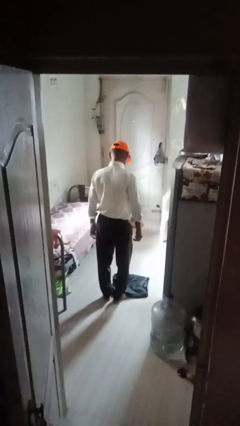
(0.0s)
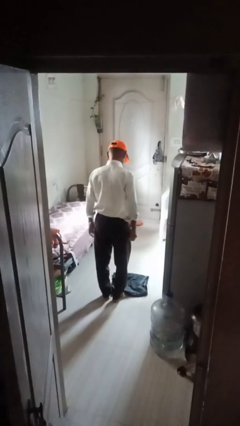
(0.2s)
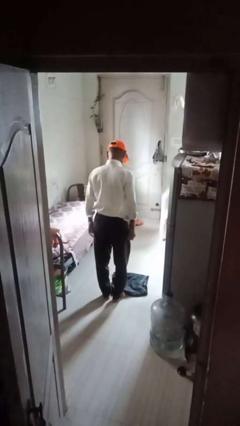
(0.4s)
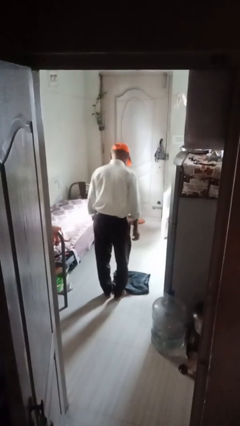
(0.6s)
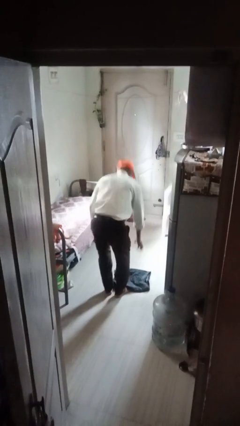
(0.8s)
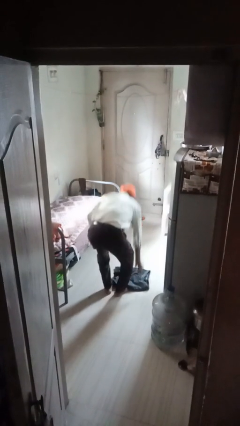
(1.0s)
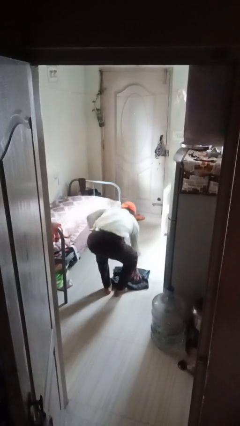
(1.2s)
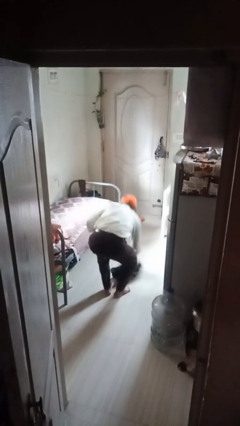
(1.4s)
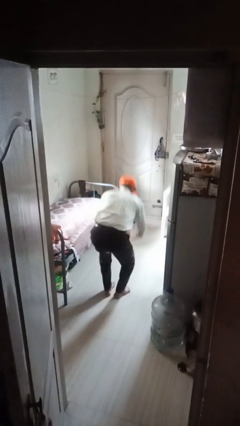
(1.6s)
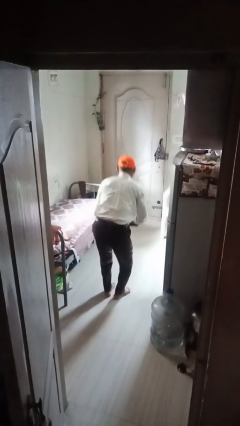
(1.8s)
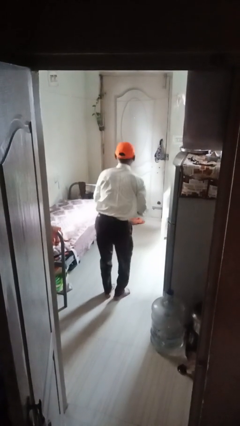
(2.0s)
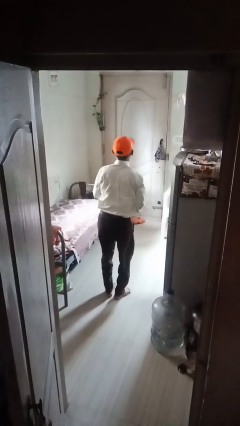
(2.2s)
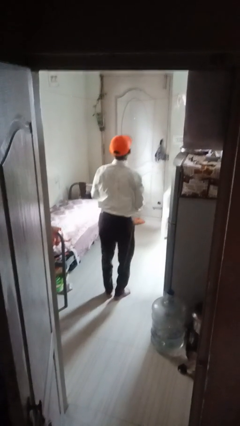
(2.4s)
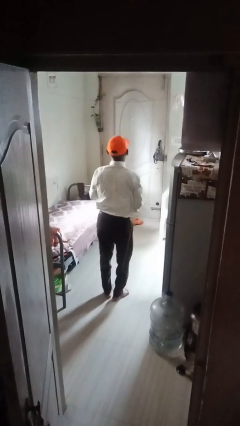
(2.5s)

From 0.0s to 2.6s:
person picks up object from floor

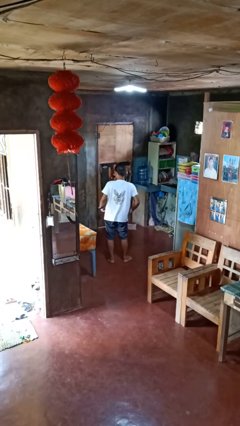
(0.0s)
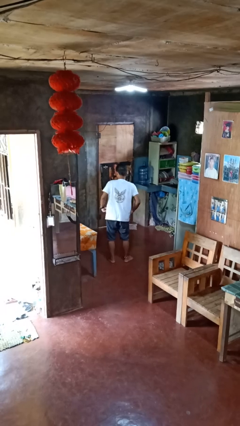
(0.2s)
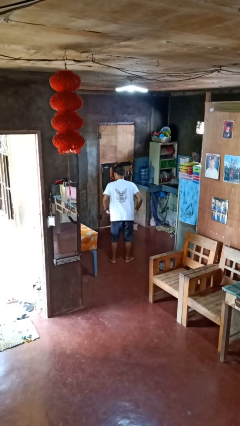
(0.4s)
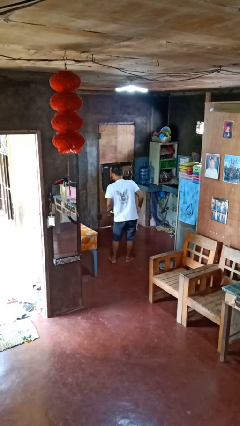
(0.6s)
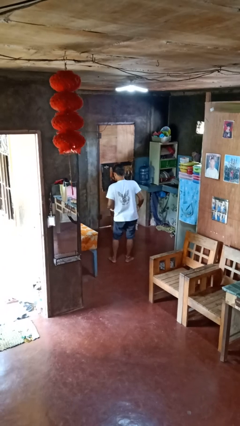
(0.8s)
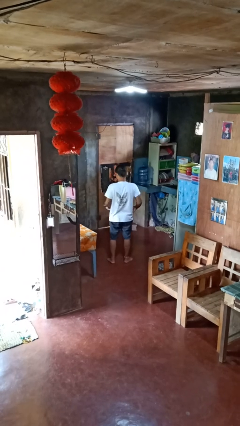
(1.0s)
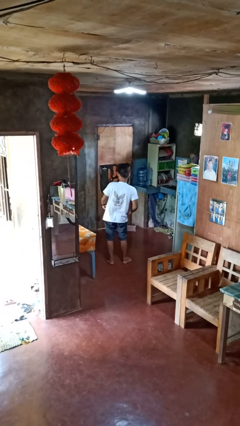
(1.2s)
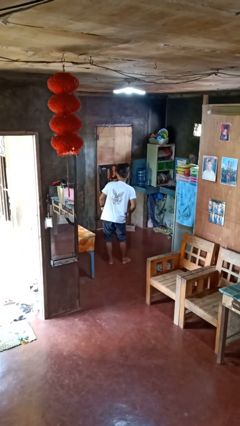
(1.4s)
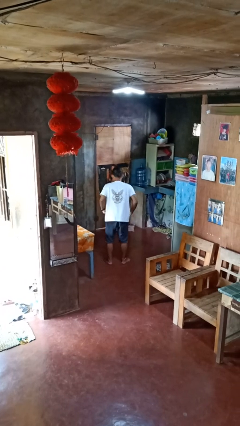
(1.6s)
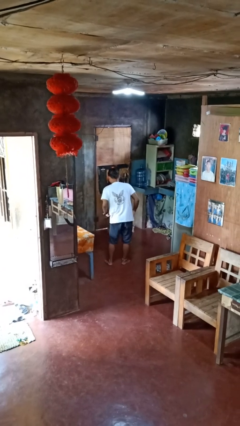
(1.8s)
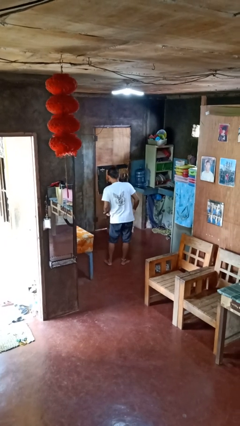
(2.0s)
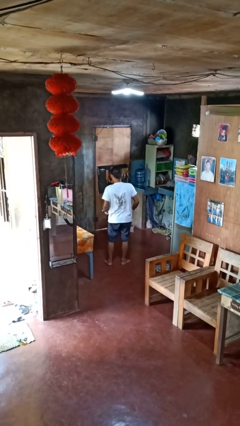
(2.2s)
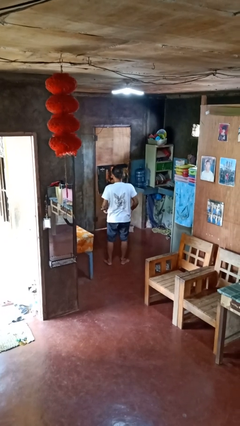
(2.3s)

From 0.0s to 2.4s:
person wiggles hips

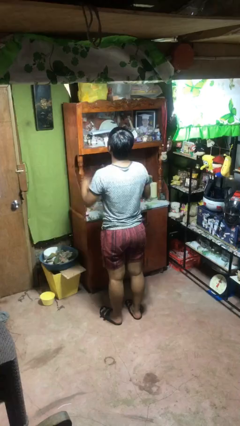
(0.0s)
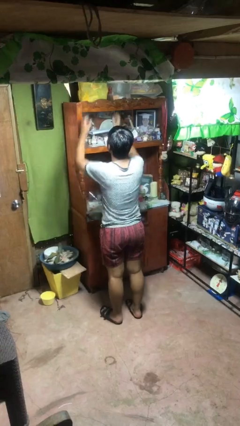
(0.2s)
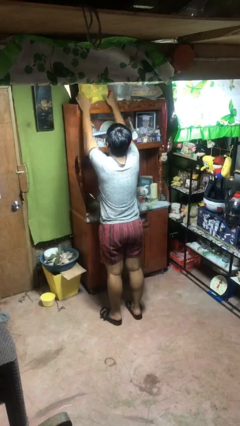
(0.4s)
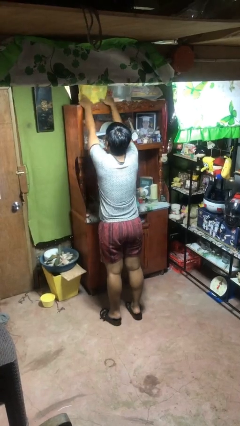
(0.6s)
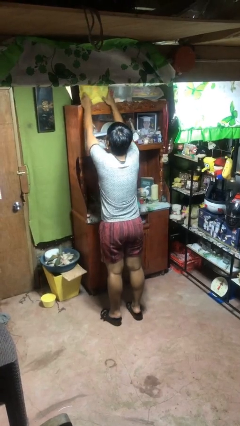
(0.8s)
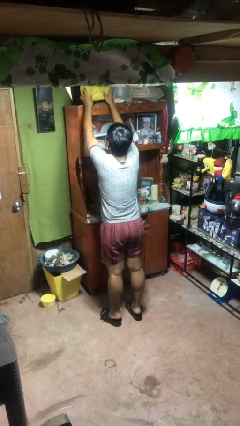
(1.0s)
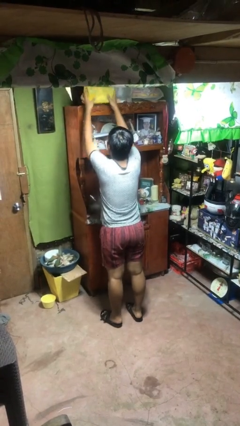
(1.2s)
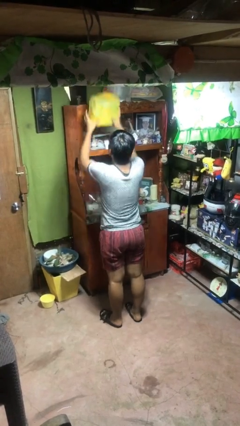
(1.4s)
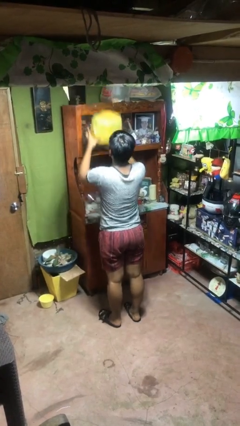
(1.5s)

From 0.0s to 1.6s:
person picks up object from shelf

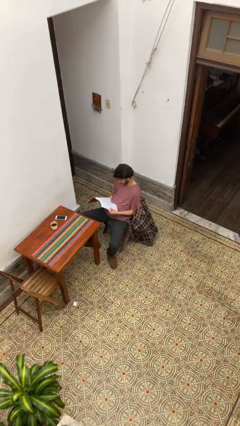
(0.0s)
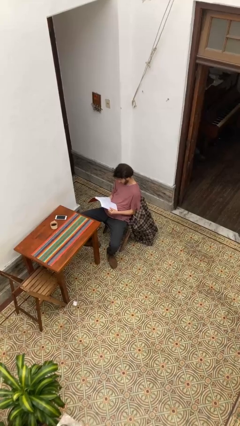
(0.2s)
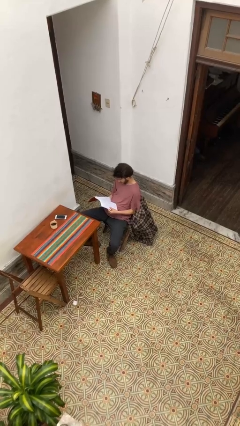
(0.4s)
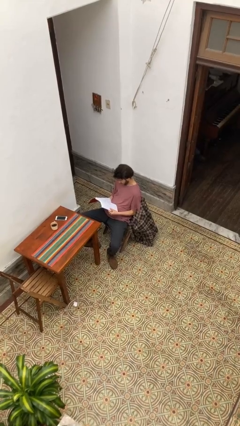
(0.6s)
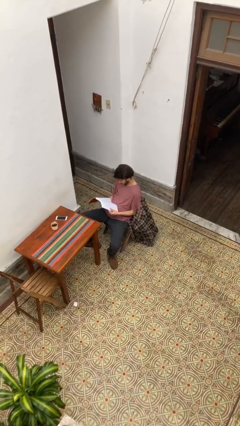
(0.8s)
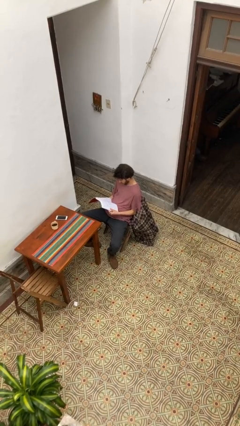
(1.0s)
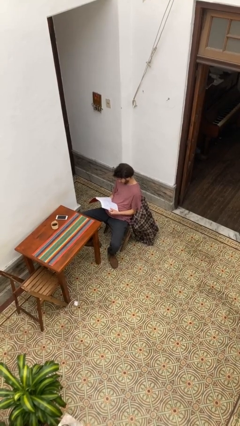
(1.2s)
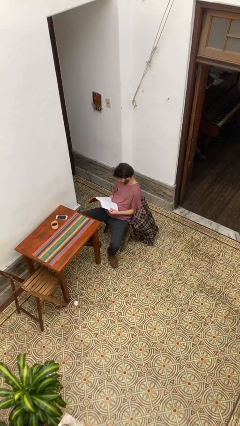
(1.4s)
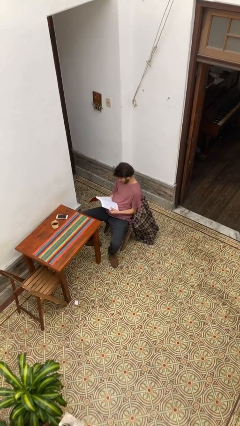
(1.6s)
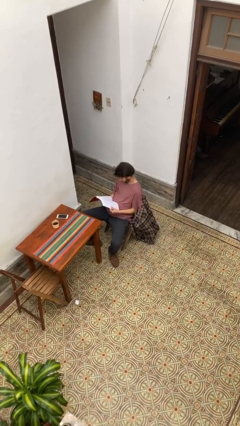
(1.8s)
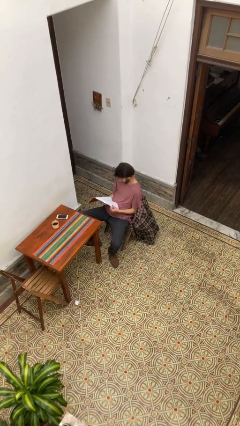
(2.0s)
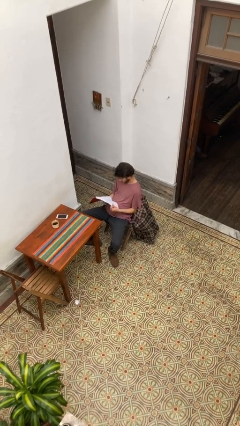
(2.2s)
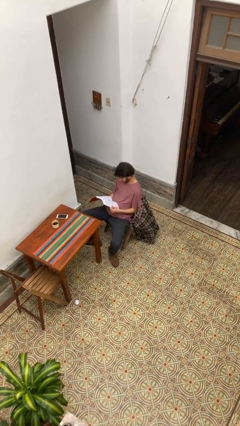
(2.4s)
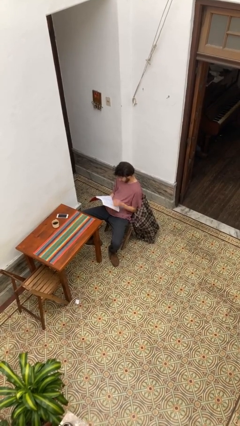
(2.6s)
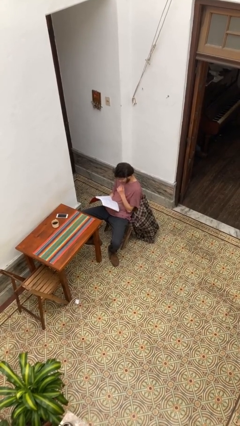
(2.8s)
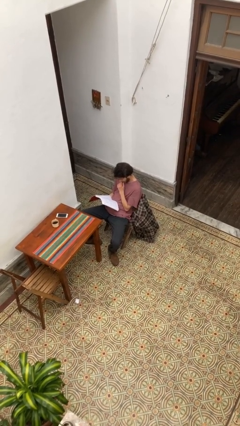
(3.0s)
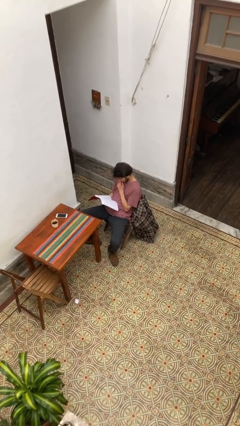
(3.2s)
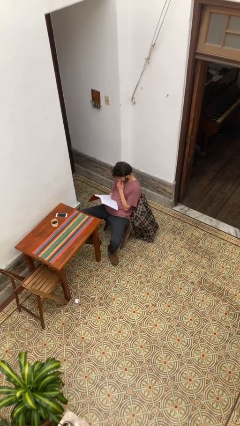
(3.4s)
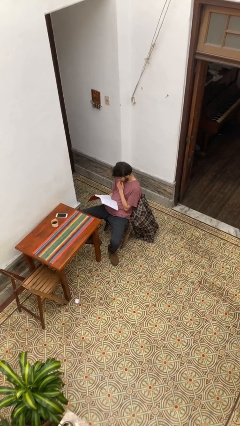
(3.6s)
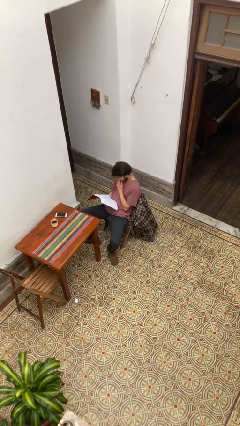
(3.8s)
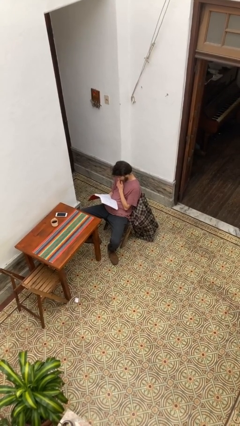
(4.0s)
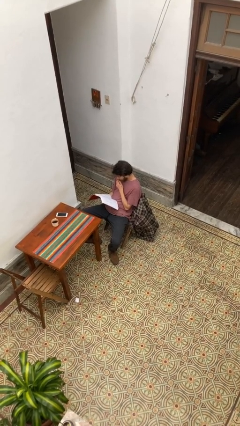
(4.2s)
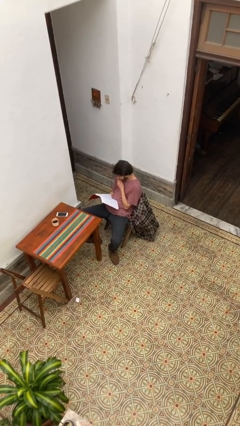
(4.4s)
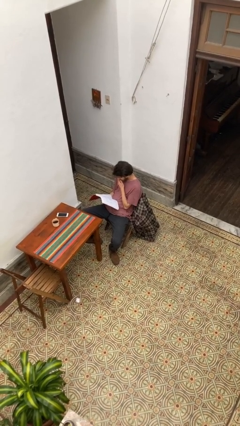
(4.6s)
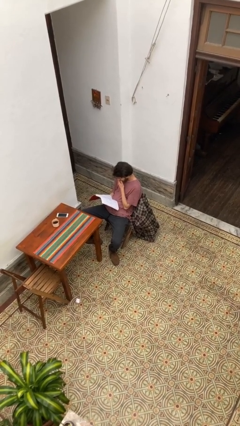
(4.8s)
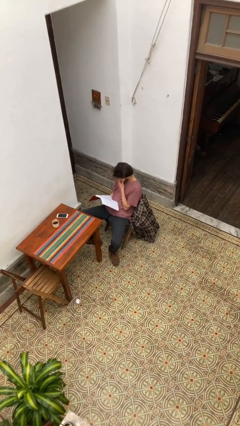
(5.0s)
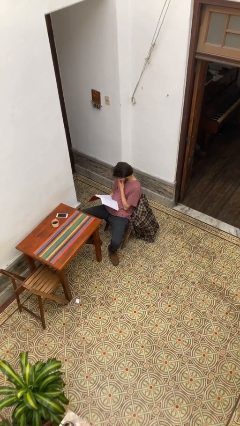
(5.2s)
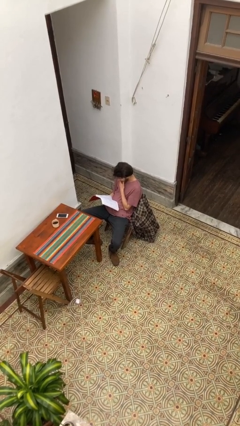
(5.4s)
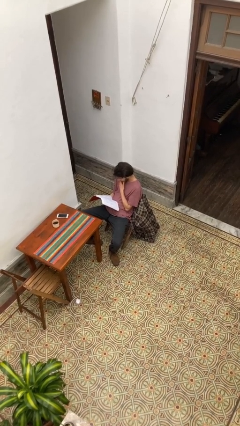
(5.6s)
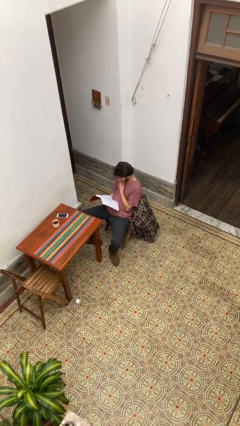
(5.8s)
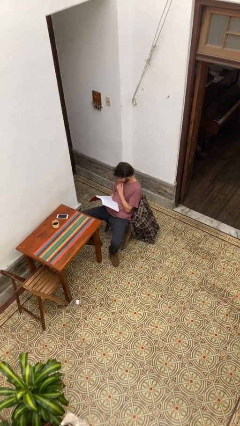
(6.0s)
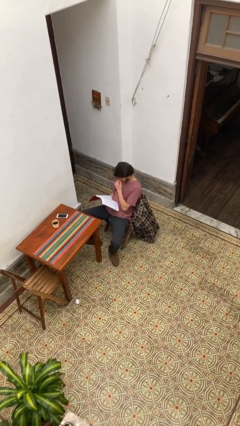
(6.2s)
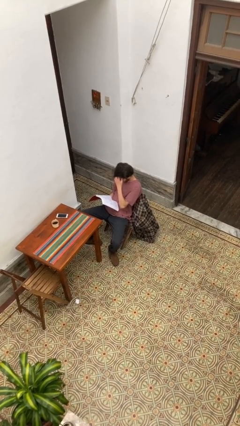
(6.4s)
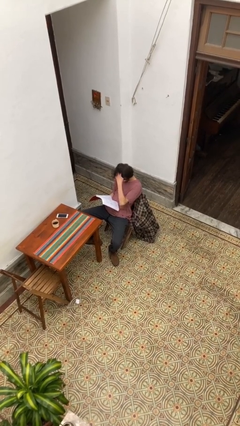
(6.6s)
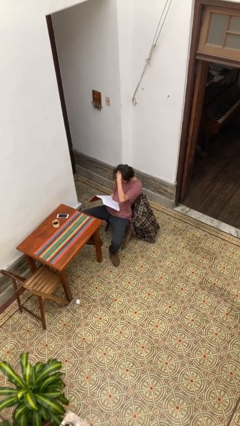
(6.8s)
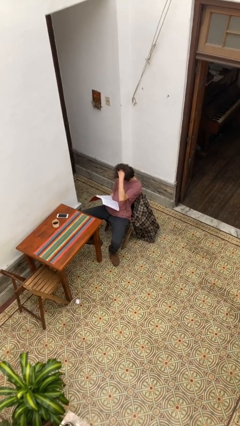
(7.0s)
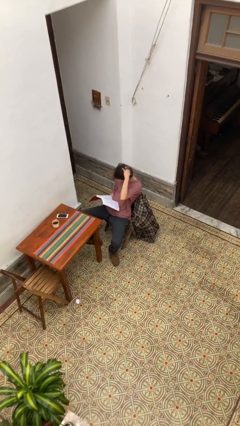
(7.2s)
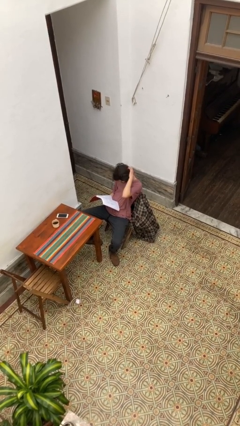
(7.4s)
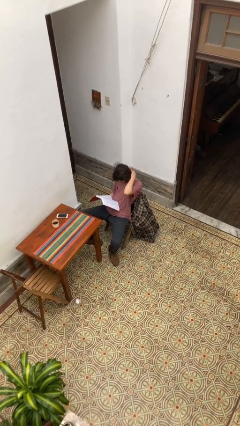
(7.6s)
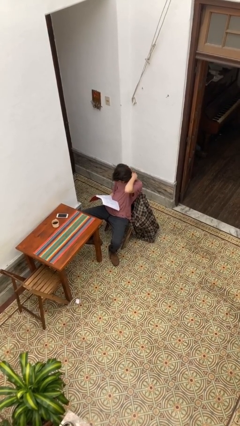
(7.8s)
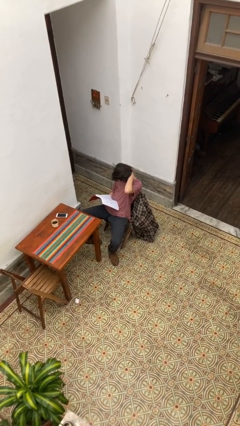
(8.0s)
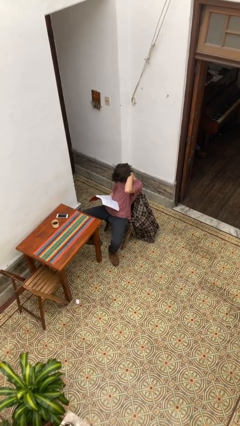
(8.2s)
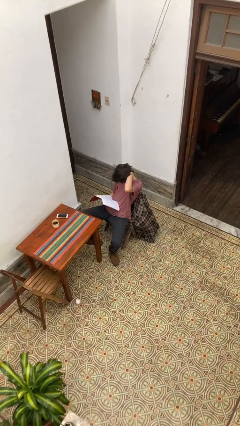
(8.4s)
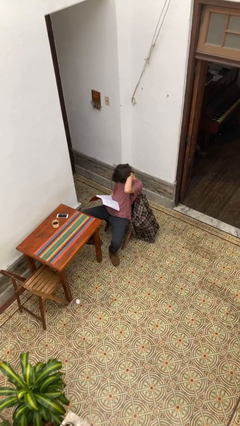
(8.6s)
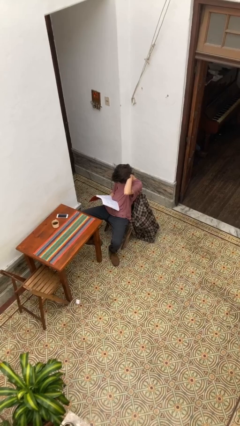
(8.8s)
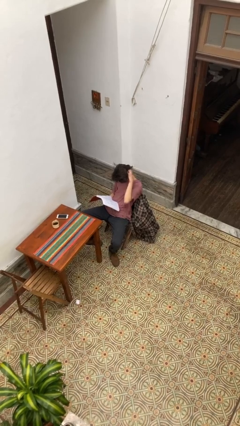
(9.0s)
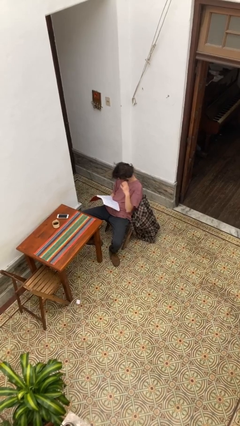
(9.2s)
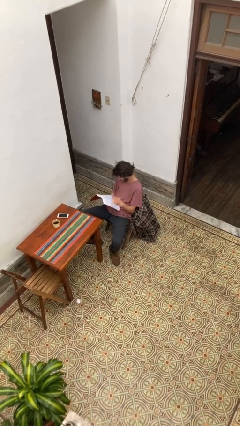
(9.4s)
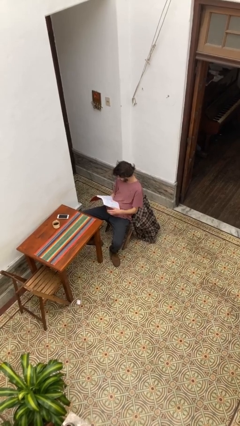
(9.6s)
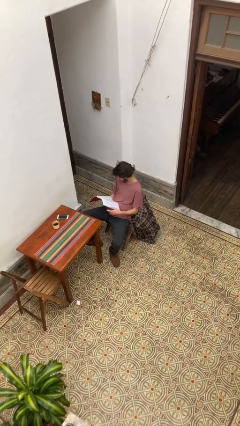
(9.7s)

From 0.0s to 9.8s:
person reads document

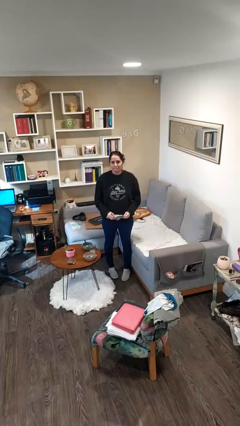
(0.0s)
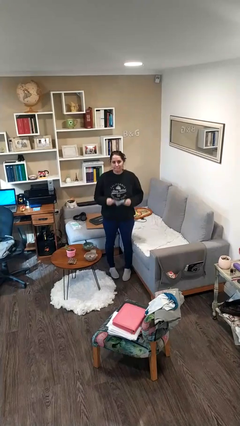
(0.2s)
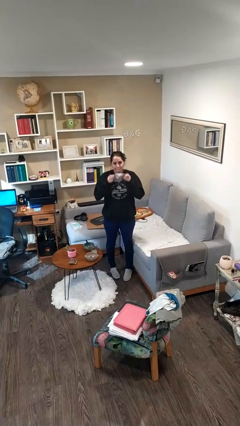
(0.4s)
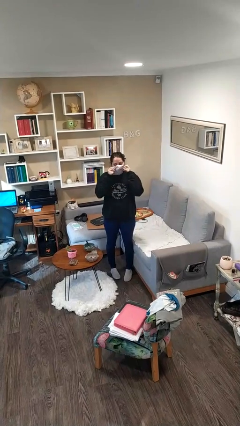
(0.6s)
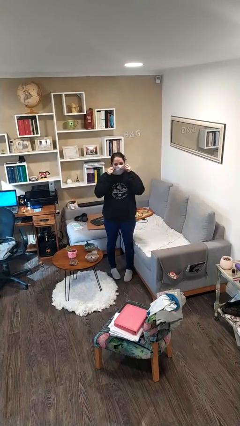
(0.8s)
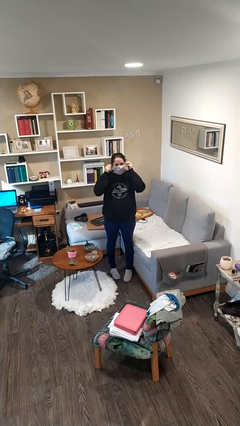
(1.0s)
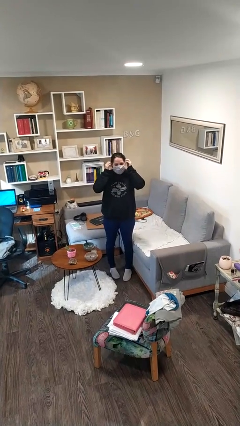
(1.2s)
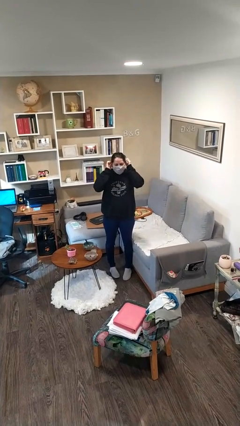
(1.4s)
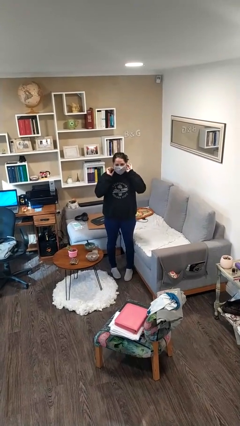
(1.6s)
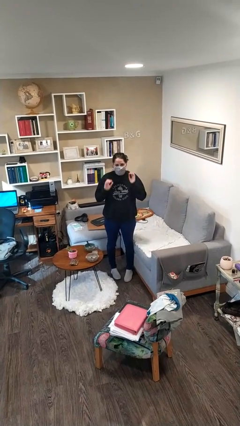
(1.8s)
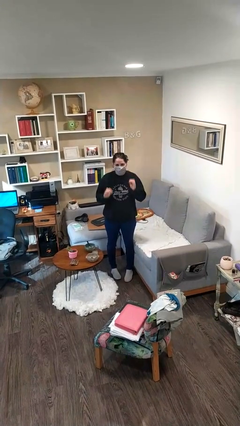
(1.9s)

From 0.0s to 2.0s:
person puts on facemask
